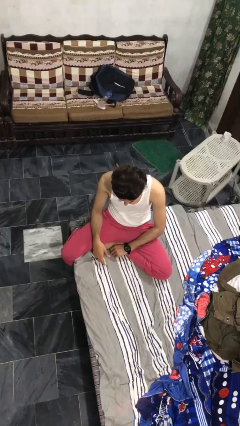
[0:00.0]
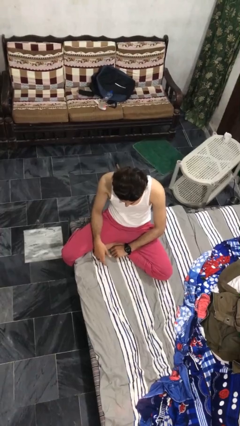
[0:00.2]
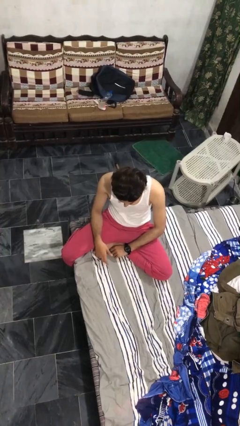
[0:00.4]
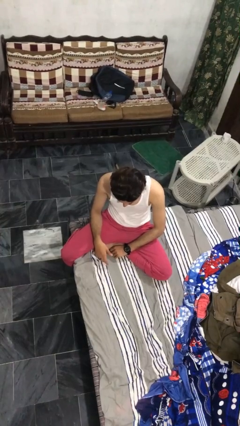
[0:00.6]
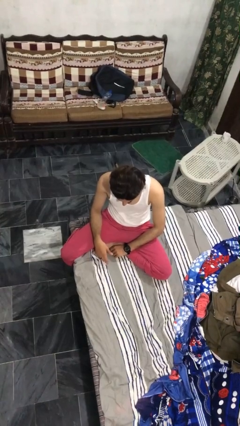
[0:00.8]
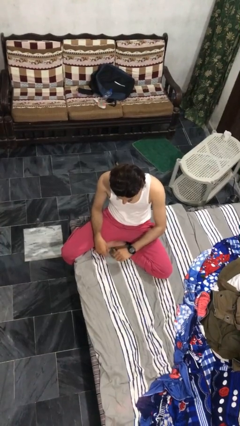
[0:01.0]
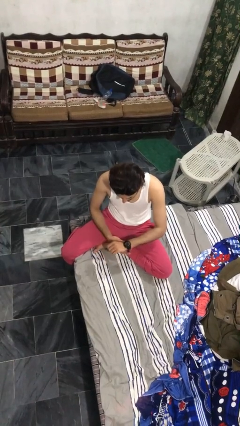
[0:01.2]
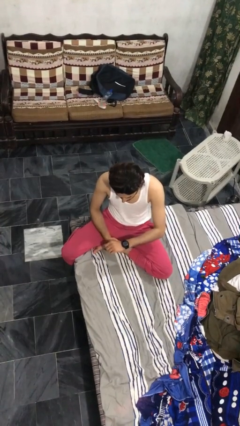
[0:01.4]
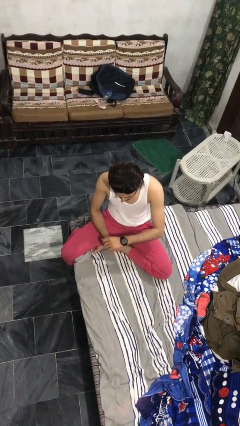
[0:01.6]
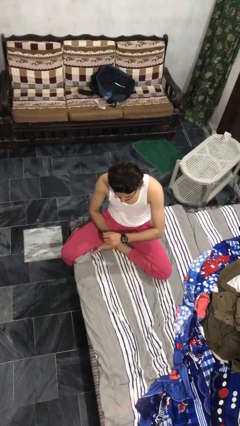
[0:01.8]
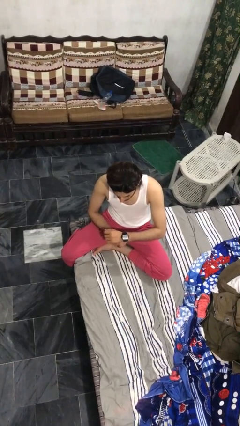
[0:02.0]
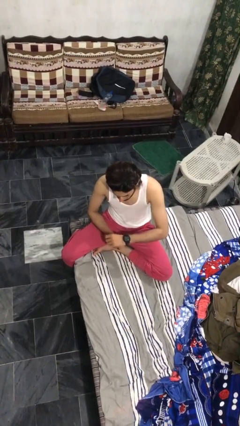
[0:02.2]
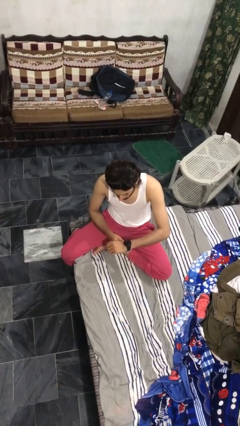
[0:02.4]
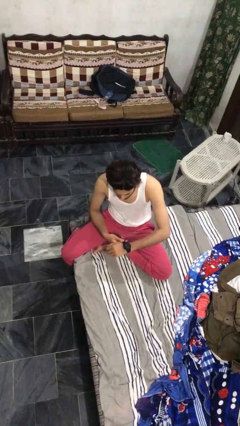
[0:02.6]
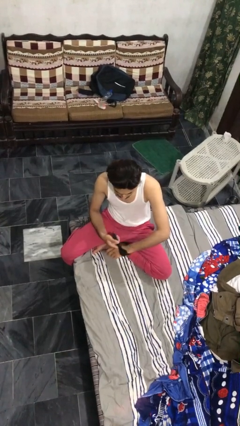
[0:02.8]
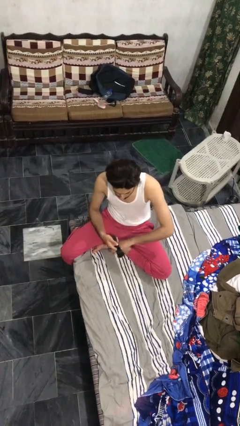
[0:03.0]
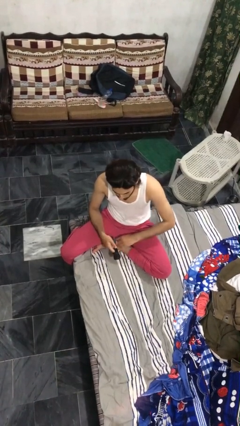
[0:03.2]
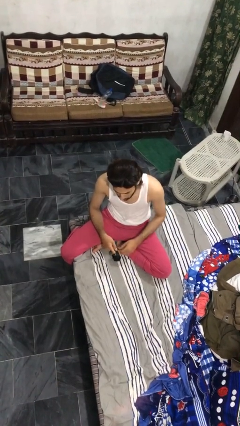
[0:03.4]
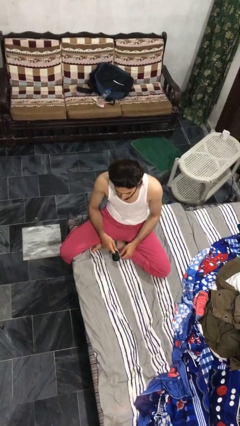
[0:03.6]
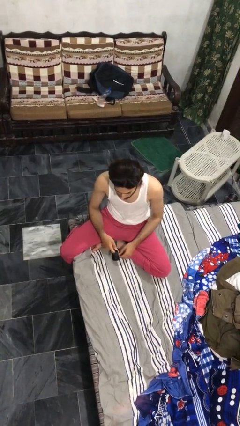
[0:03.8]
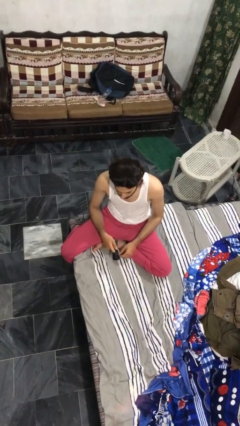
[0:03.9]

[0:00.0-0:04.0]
person takes off wristwatch

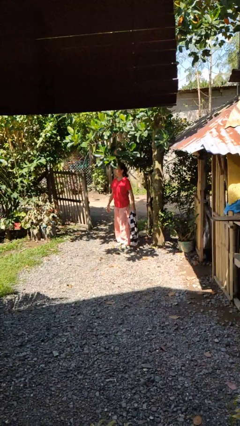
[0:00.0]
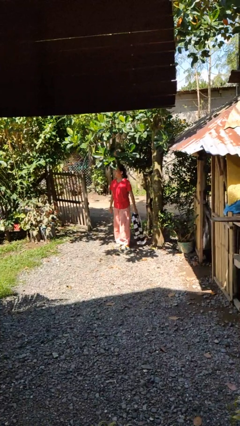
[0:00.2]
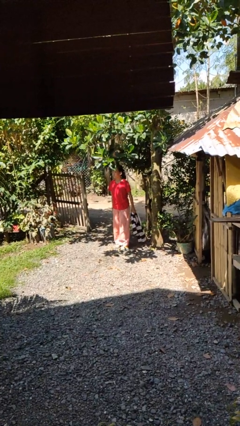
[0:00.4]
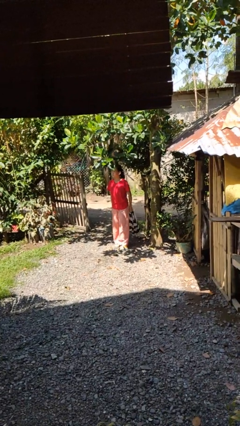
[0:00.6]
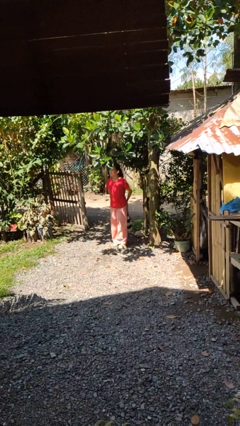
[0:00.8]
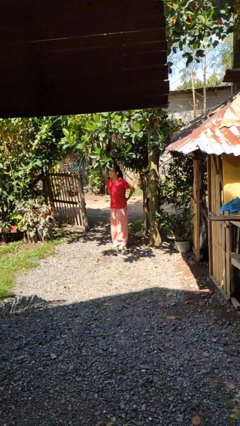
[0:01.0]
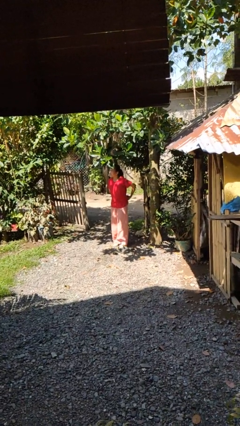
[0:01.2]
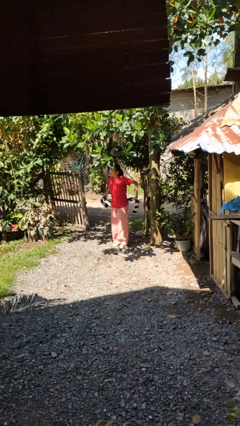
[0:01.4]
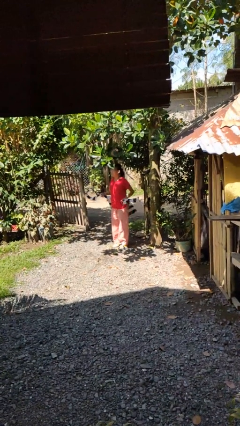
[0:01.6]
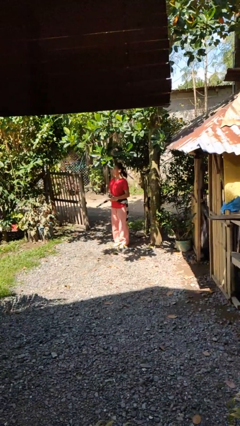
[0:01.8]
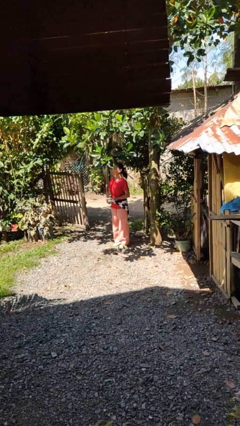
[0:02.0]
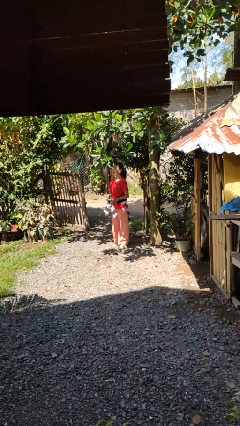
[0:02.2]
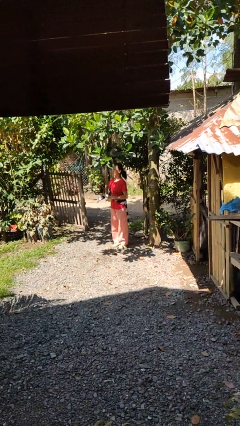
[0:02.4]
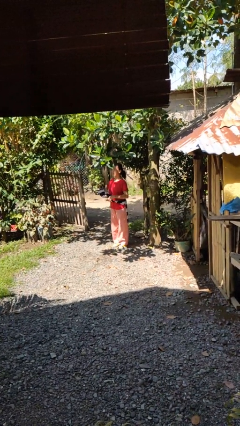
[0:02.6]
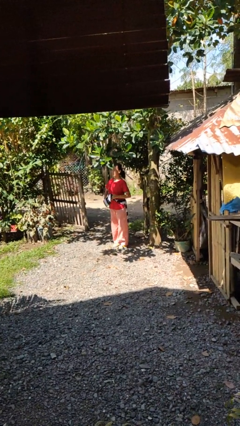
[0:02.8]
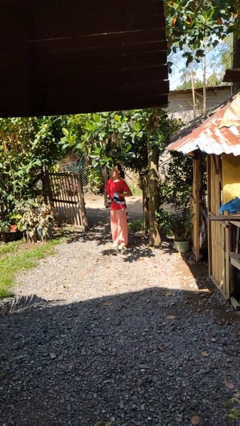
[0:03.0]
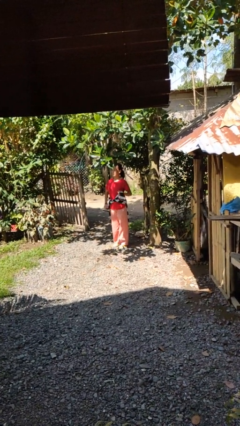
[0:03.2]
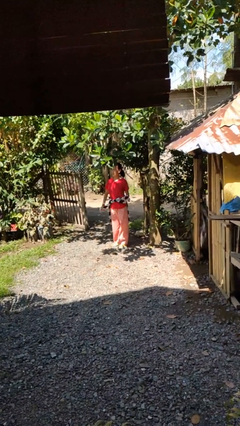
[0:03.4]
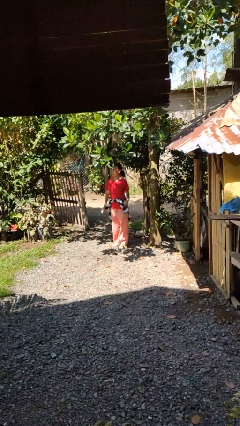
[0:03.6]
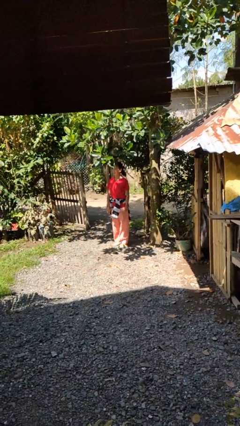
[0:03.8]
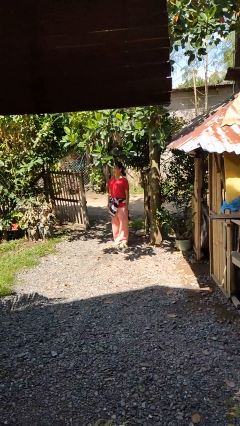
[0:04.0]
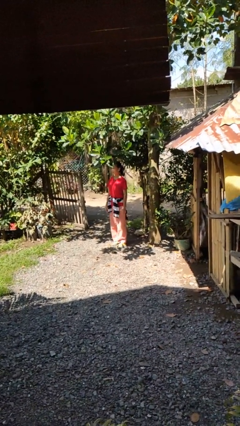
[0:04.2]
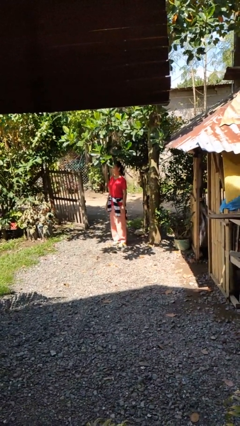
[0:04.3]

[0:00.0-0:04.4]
person ties jacket around waist

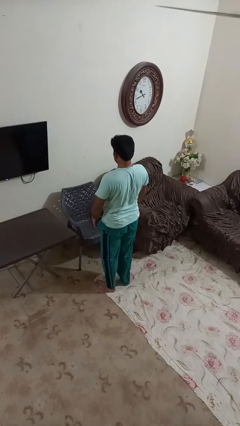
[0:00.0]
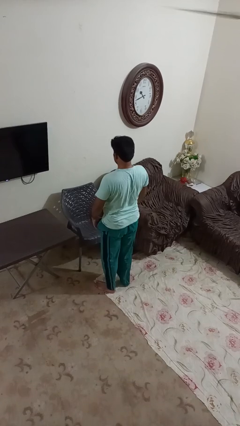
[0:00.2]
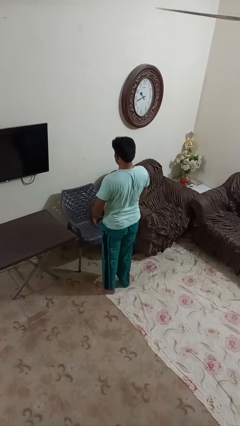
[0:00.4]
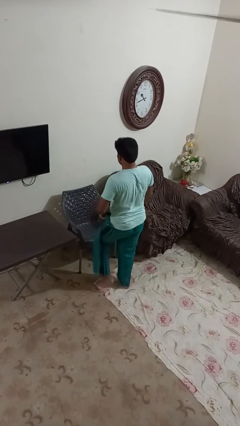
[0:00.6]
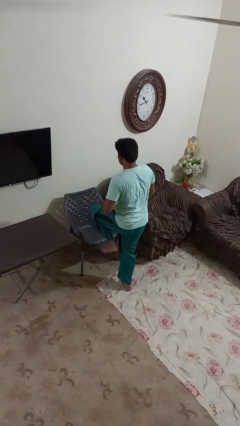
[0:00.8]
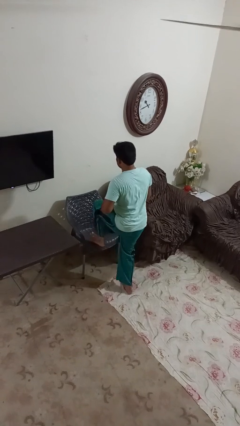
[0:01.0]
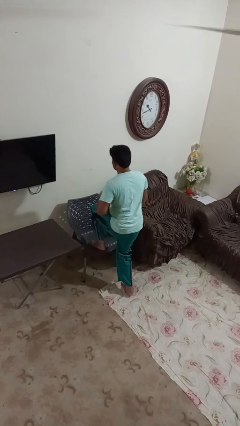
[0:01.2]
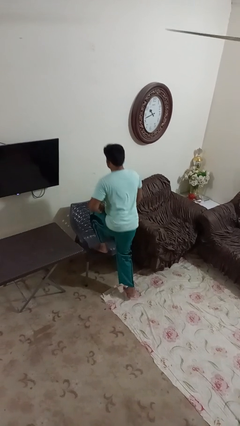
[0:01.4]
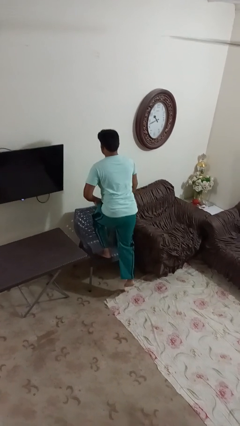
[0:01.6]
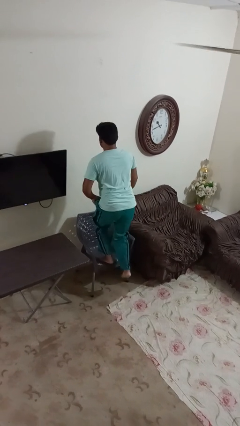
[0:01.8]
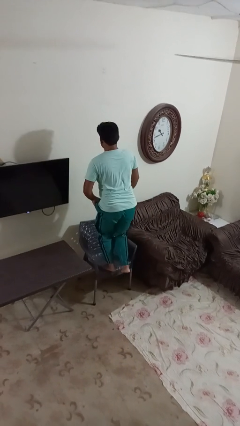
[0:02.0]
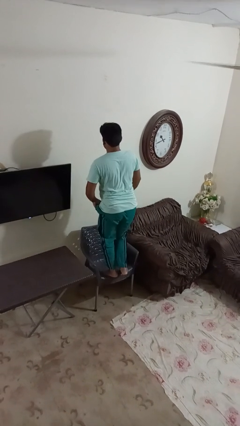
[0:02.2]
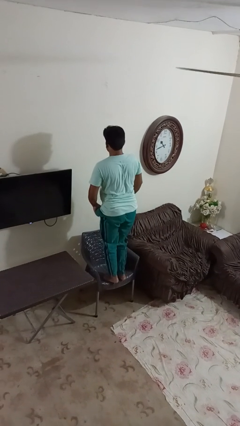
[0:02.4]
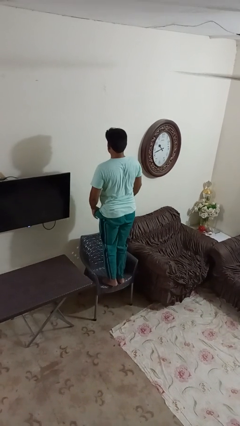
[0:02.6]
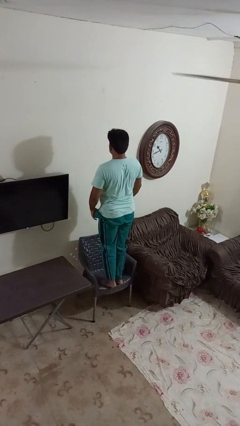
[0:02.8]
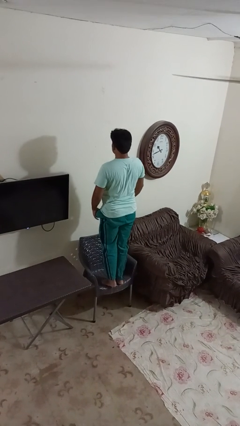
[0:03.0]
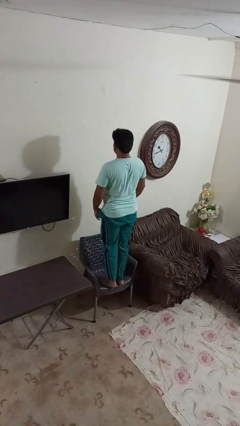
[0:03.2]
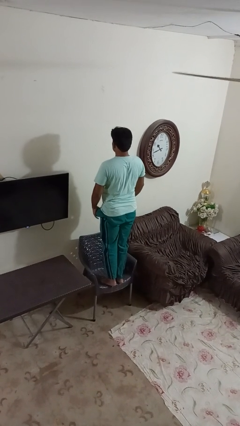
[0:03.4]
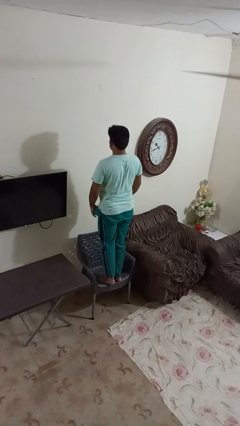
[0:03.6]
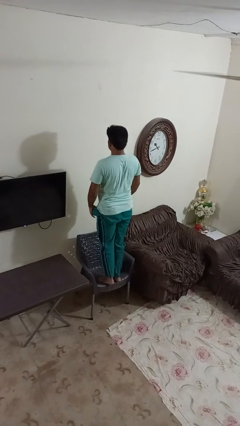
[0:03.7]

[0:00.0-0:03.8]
person climbs on chair

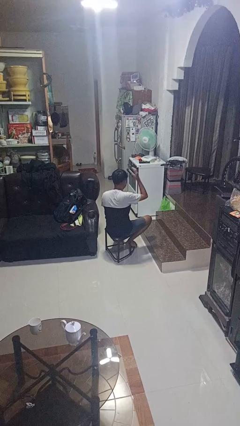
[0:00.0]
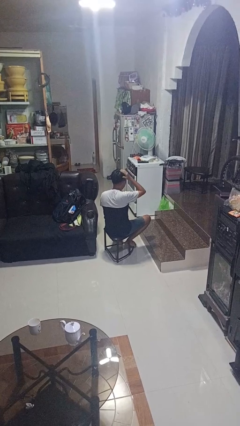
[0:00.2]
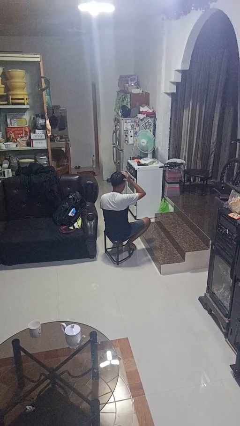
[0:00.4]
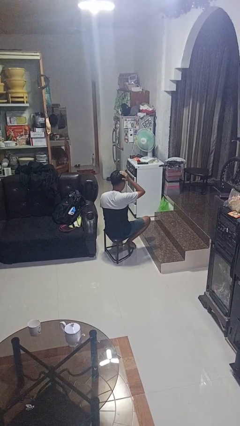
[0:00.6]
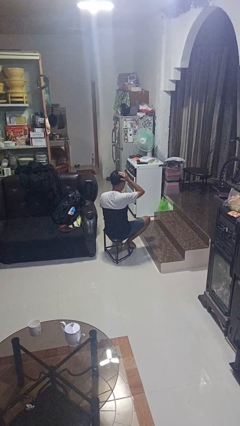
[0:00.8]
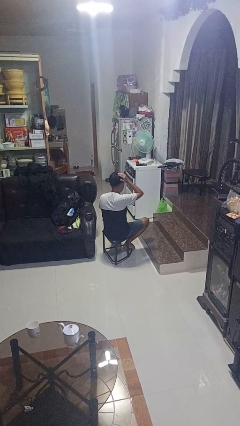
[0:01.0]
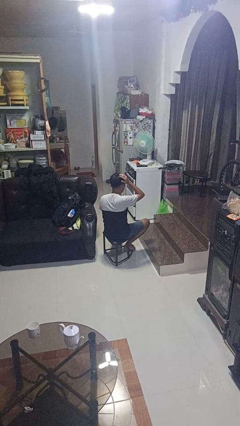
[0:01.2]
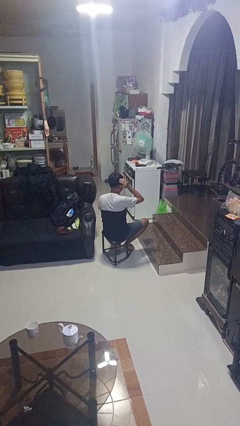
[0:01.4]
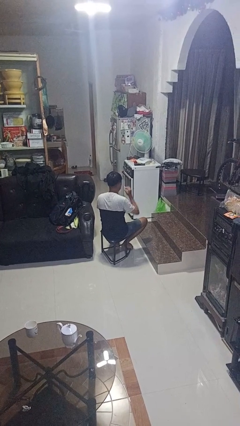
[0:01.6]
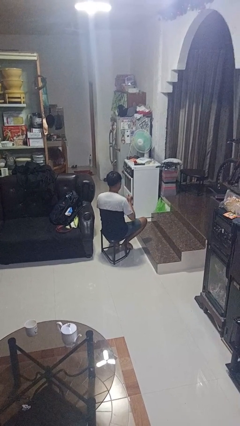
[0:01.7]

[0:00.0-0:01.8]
person pats head

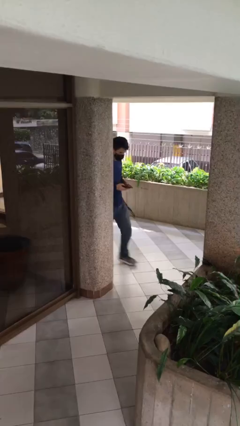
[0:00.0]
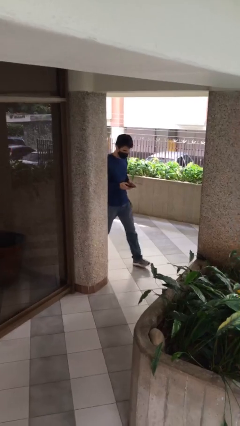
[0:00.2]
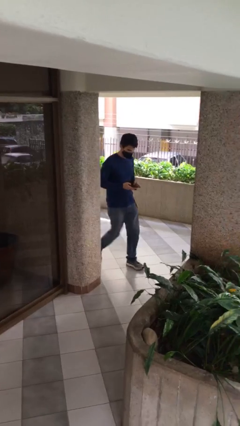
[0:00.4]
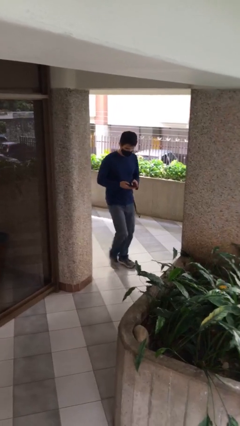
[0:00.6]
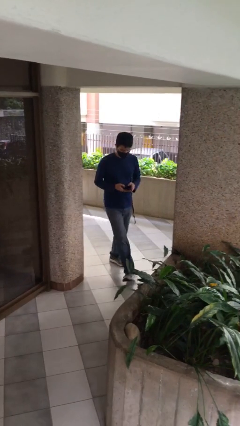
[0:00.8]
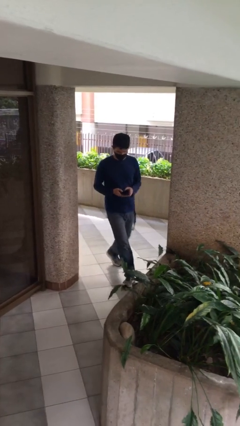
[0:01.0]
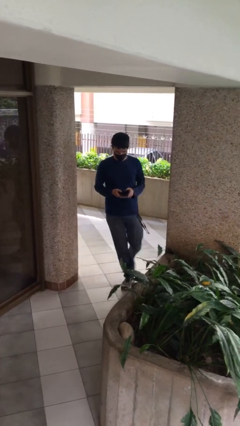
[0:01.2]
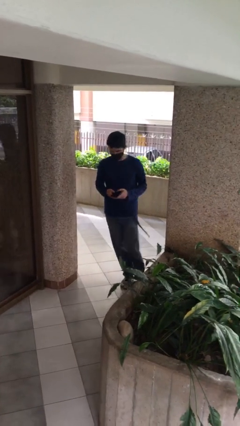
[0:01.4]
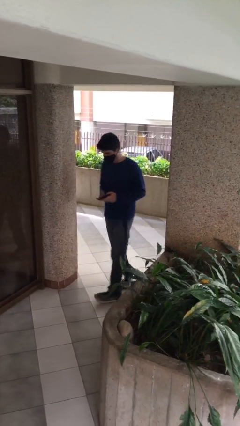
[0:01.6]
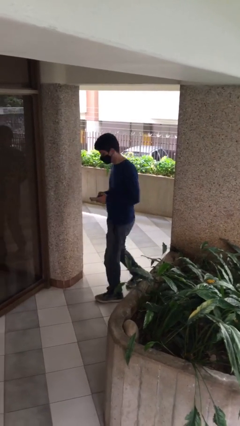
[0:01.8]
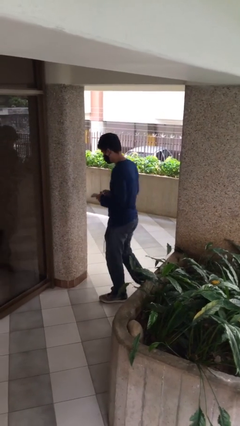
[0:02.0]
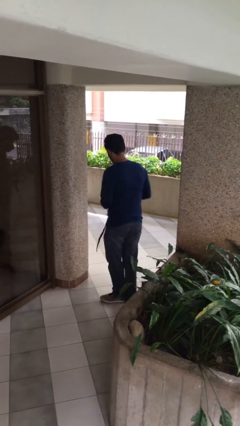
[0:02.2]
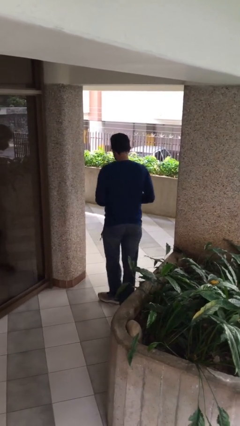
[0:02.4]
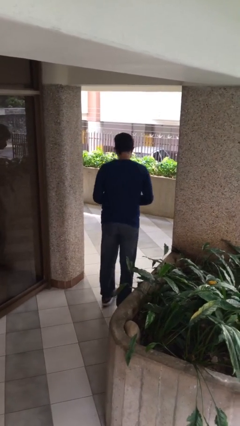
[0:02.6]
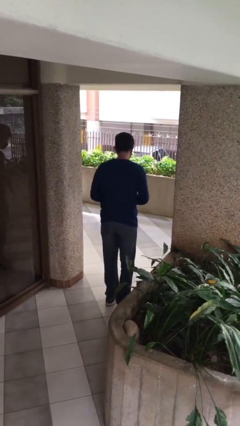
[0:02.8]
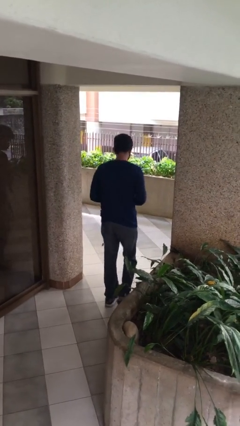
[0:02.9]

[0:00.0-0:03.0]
person enters scene through structure

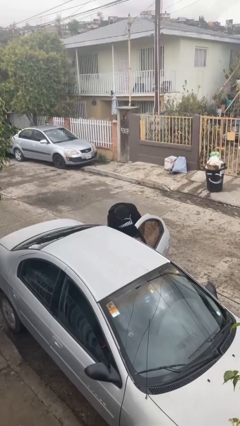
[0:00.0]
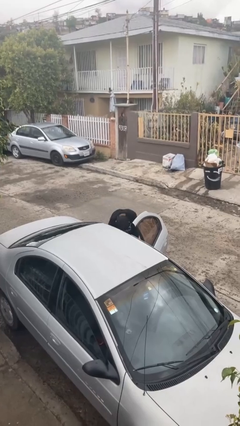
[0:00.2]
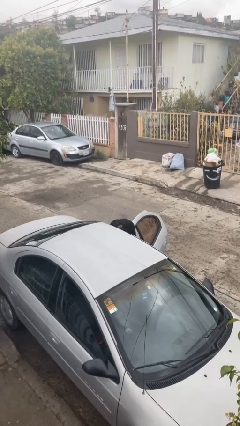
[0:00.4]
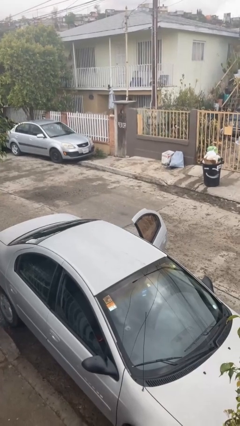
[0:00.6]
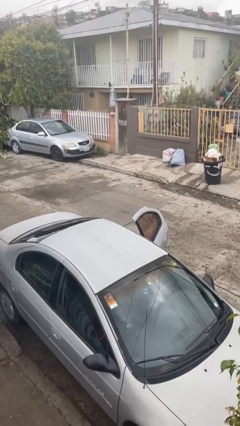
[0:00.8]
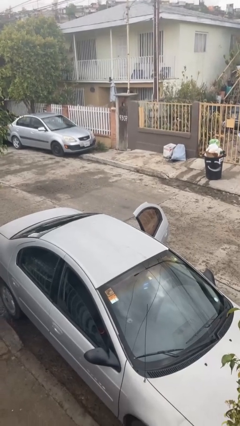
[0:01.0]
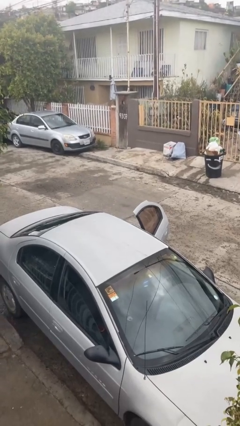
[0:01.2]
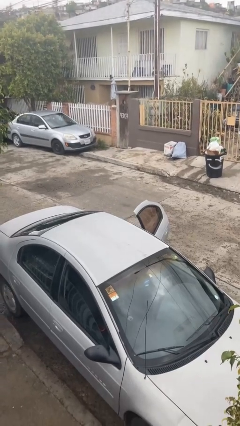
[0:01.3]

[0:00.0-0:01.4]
person enters car
